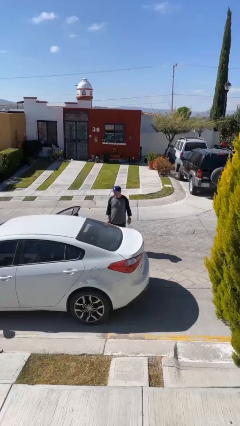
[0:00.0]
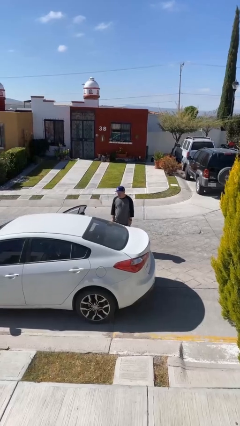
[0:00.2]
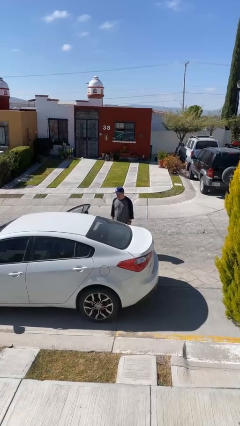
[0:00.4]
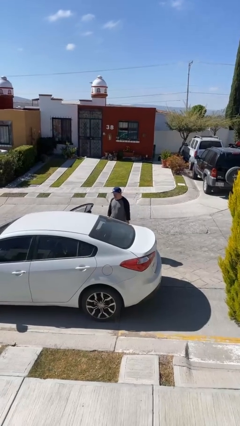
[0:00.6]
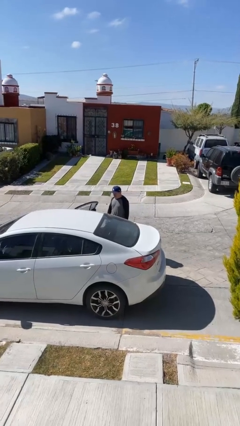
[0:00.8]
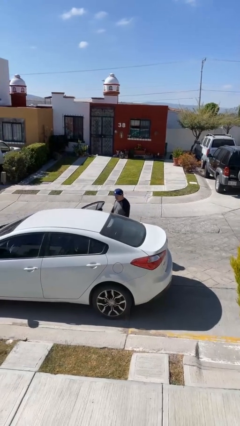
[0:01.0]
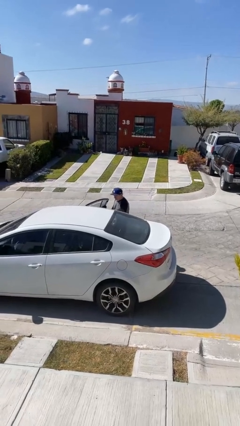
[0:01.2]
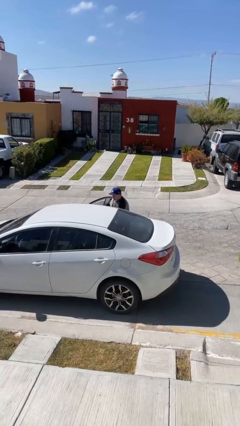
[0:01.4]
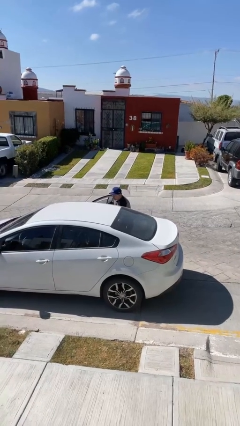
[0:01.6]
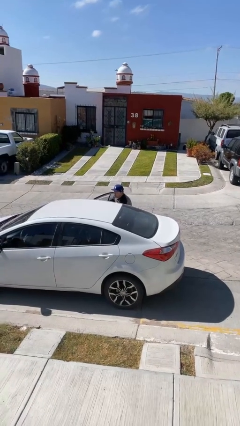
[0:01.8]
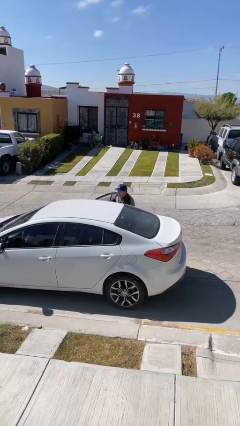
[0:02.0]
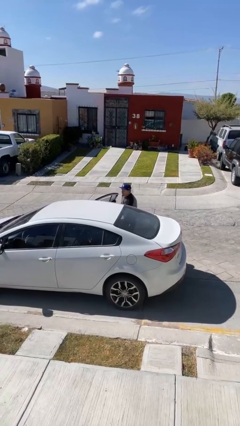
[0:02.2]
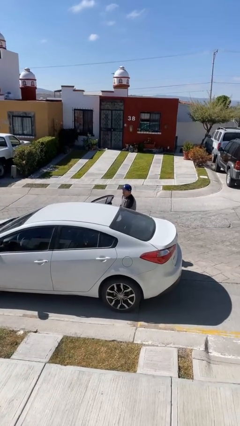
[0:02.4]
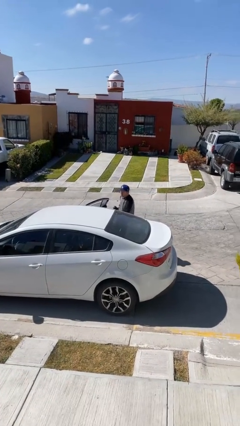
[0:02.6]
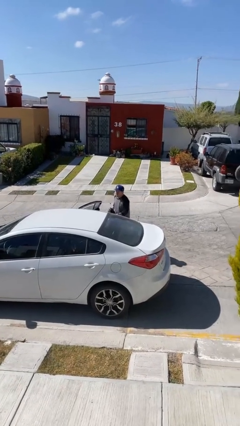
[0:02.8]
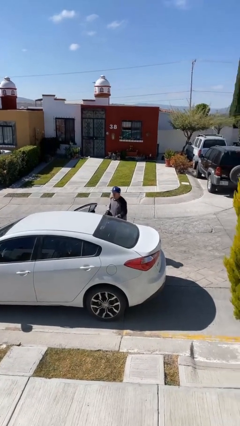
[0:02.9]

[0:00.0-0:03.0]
person unloads car

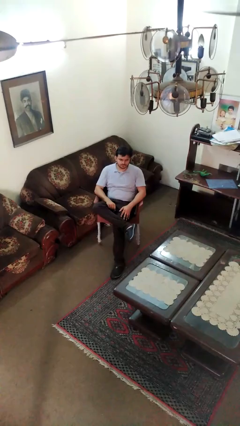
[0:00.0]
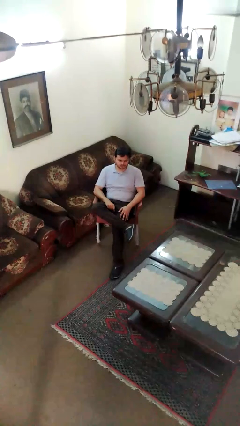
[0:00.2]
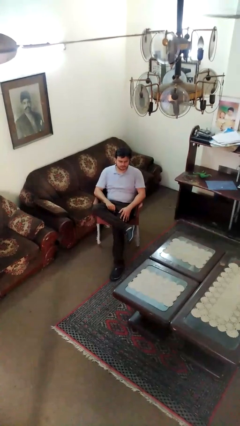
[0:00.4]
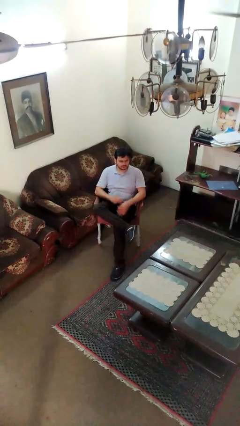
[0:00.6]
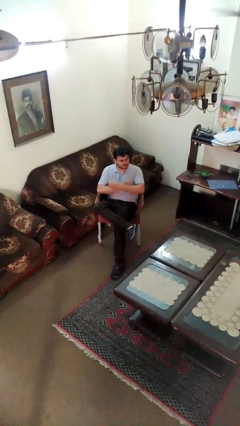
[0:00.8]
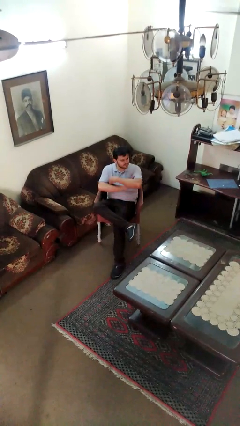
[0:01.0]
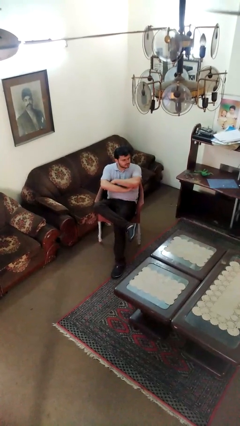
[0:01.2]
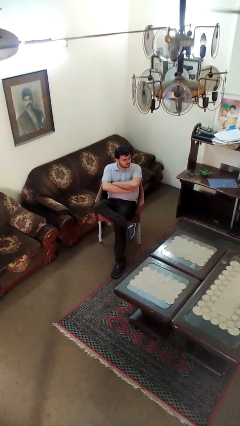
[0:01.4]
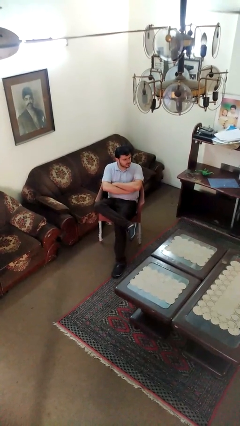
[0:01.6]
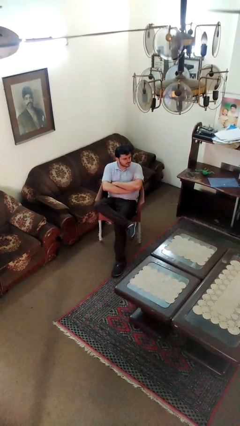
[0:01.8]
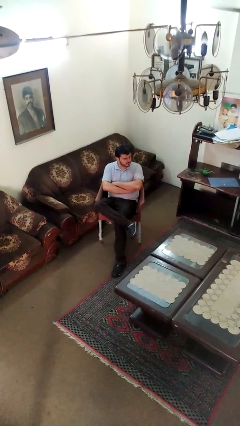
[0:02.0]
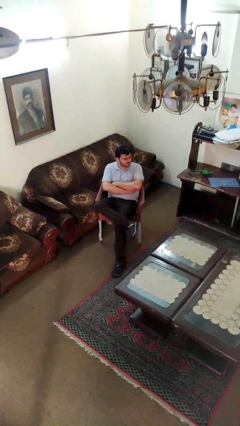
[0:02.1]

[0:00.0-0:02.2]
person crosses arms

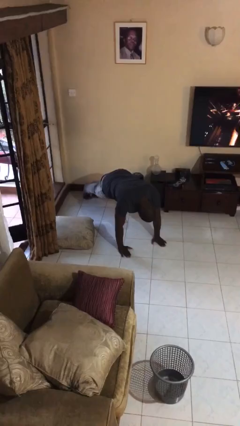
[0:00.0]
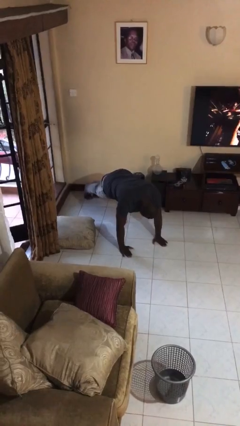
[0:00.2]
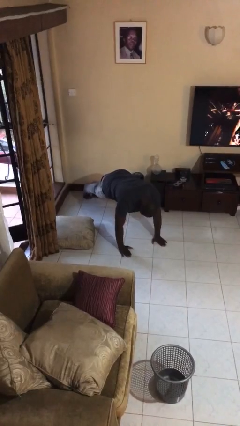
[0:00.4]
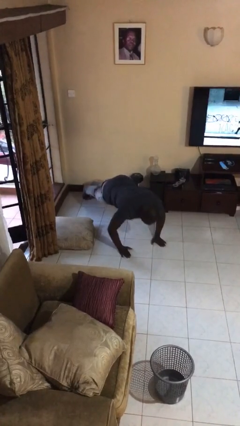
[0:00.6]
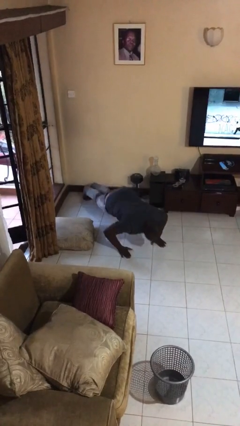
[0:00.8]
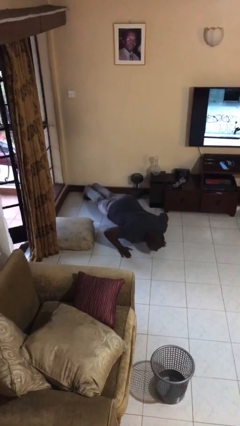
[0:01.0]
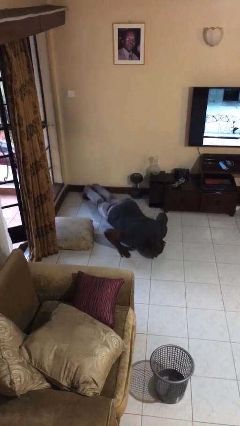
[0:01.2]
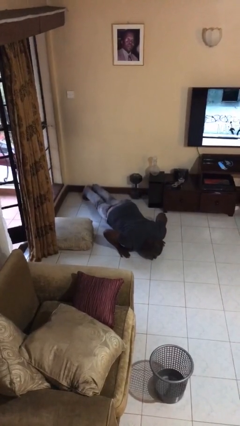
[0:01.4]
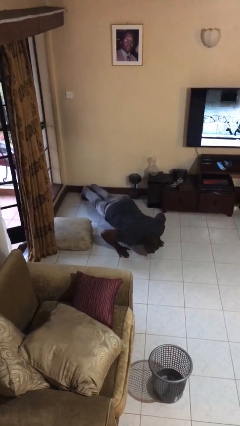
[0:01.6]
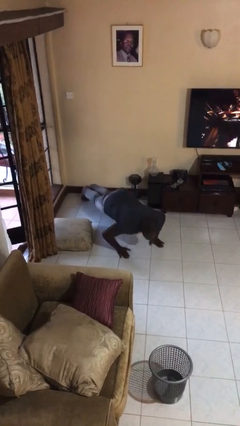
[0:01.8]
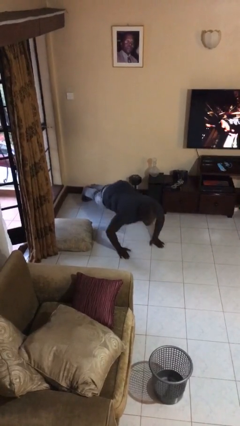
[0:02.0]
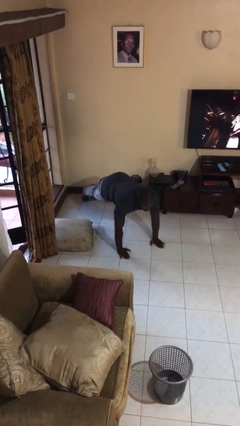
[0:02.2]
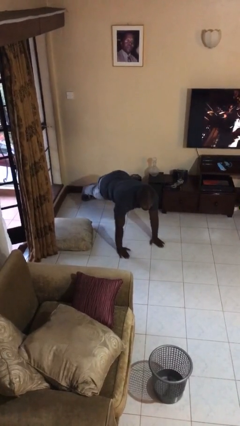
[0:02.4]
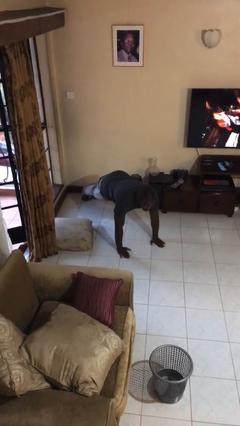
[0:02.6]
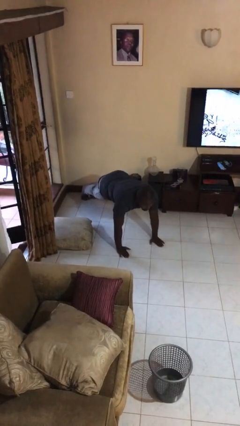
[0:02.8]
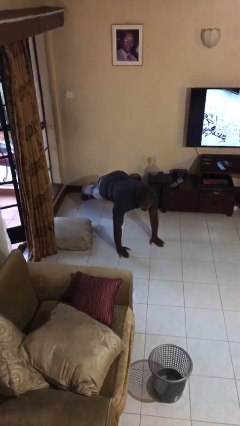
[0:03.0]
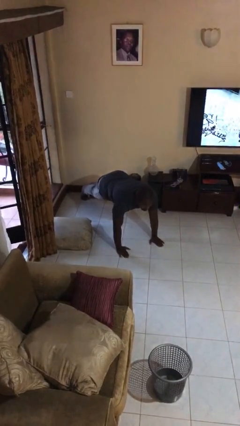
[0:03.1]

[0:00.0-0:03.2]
person exercises with pushup

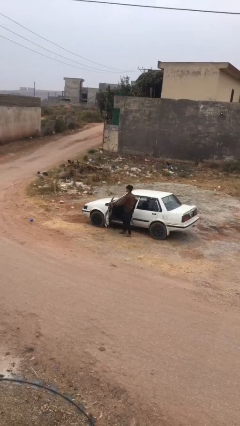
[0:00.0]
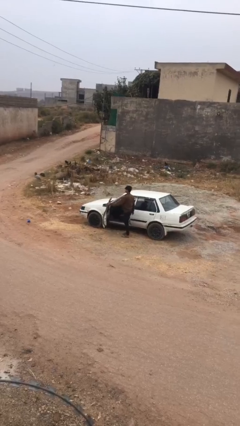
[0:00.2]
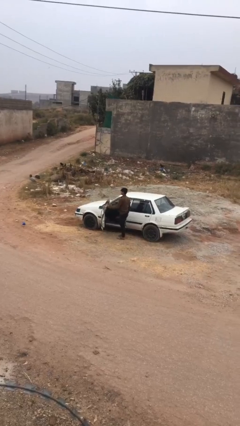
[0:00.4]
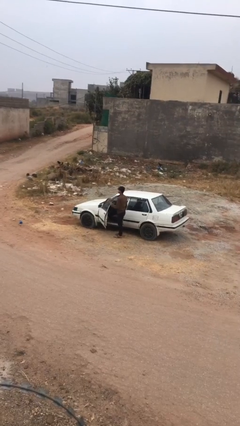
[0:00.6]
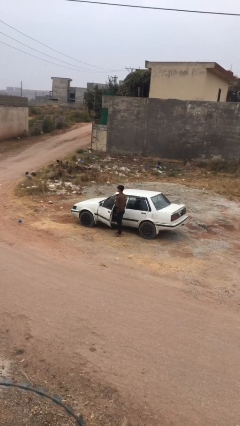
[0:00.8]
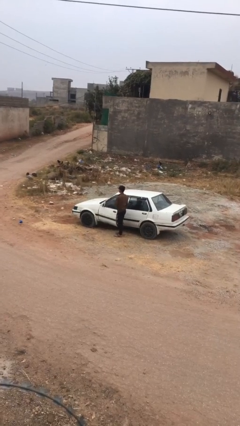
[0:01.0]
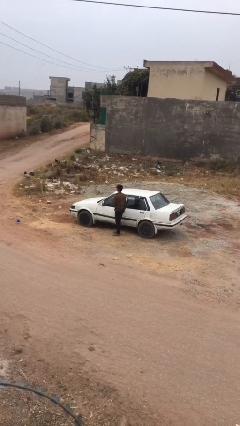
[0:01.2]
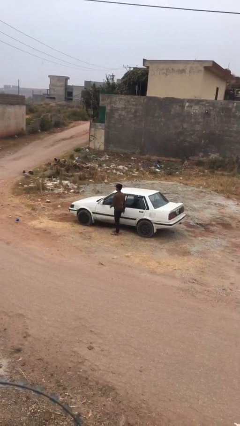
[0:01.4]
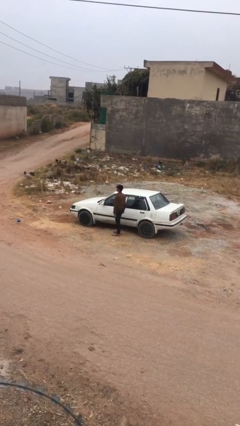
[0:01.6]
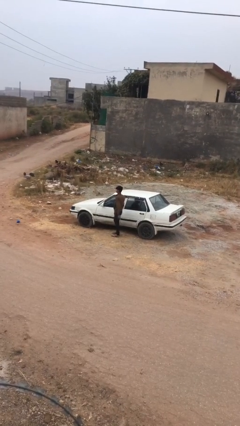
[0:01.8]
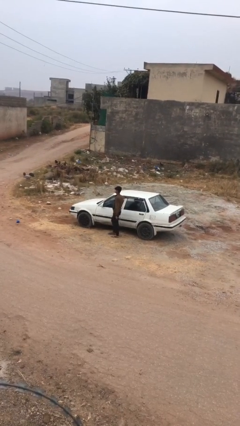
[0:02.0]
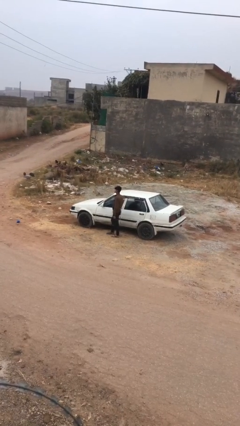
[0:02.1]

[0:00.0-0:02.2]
person closes car door

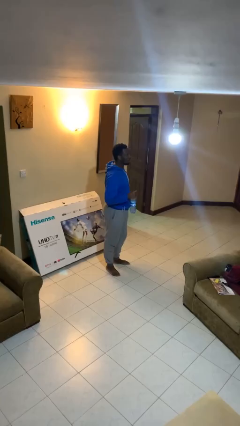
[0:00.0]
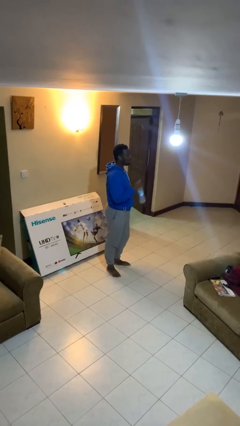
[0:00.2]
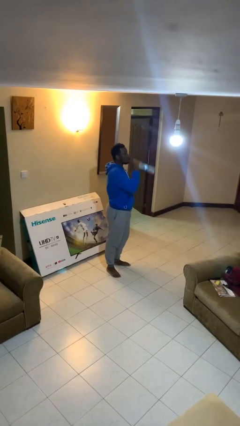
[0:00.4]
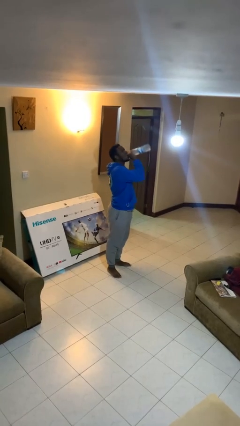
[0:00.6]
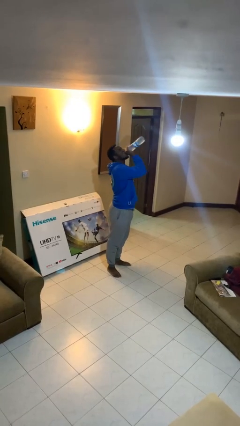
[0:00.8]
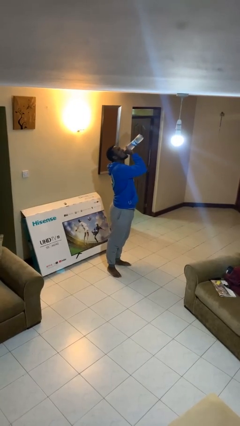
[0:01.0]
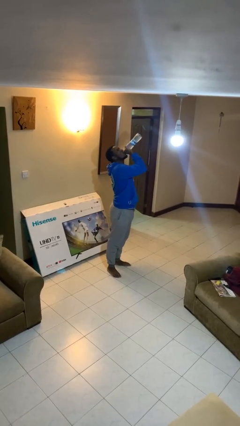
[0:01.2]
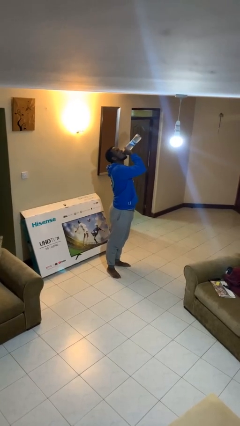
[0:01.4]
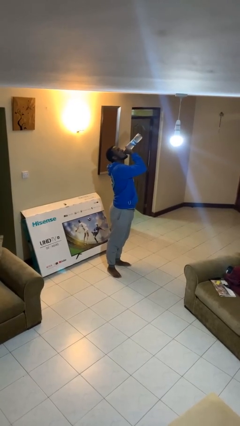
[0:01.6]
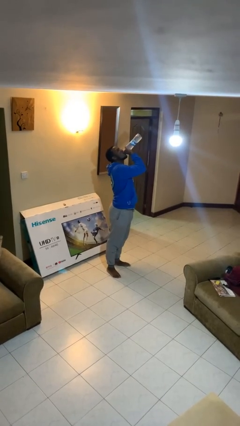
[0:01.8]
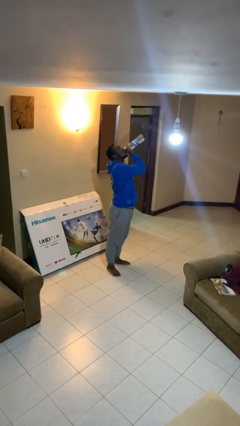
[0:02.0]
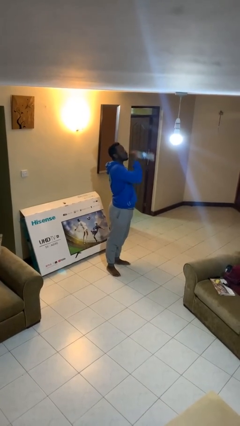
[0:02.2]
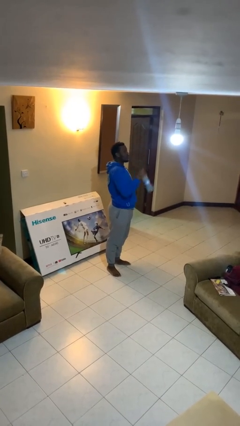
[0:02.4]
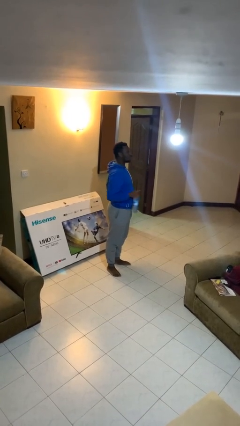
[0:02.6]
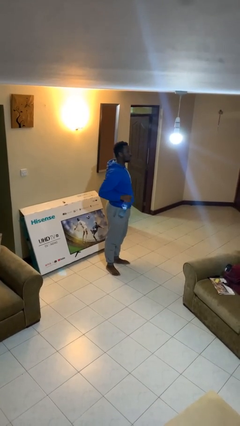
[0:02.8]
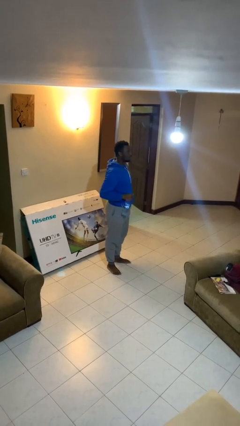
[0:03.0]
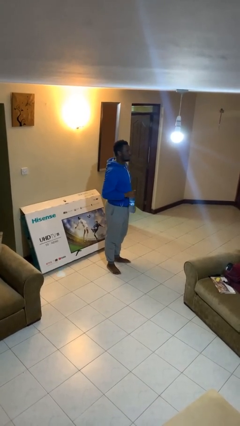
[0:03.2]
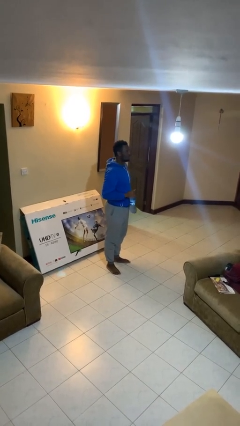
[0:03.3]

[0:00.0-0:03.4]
person drinks from bottle

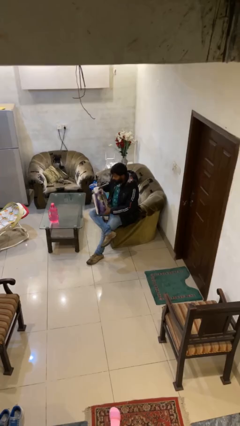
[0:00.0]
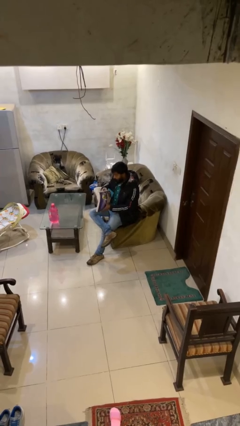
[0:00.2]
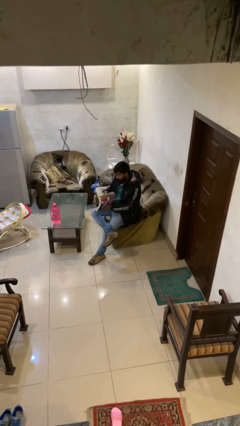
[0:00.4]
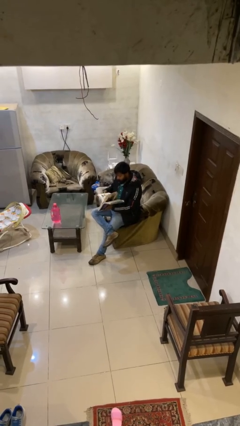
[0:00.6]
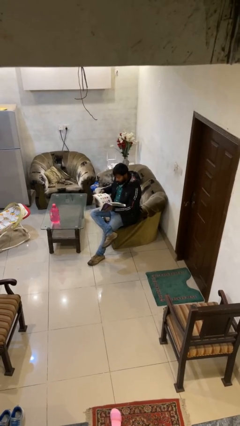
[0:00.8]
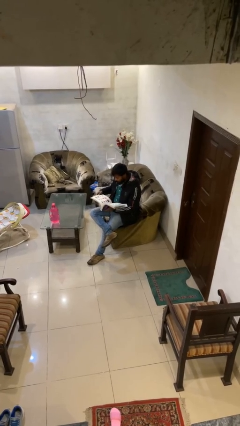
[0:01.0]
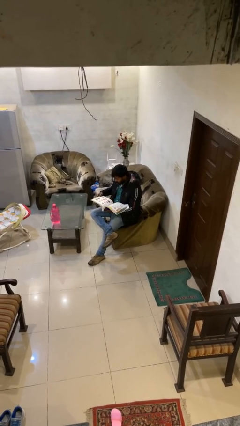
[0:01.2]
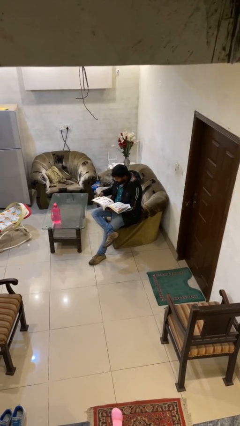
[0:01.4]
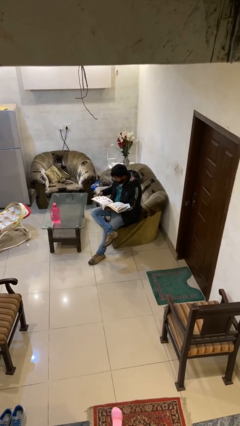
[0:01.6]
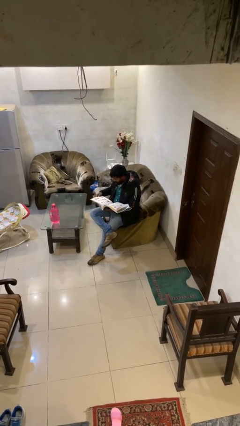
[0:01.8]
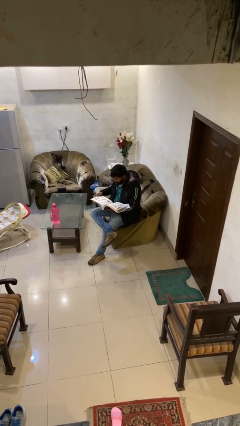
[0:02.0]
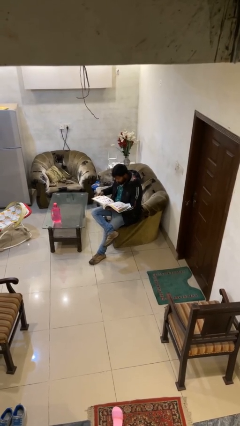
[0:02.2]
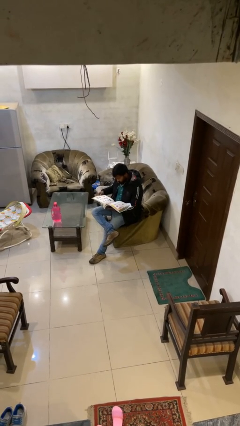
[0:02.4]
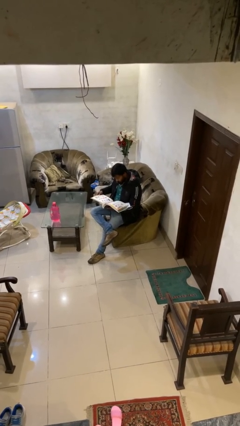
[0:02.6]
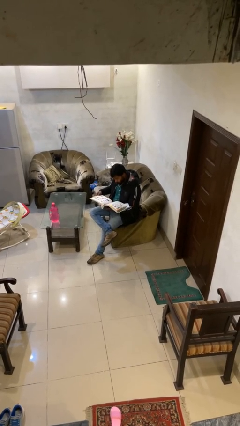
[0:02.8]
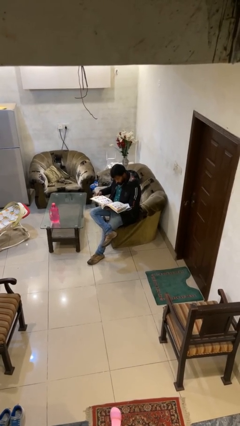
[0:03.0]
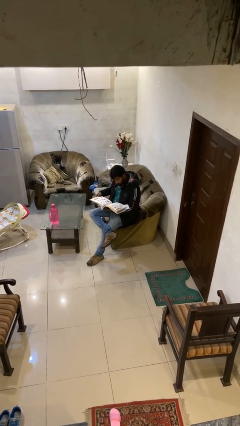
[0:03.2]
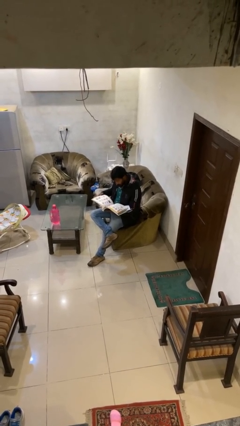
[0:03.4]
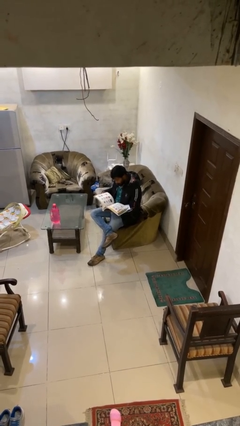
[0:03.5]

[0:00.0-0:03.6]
person reads document
